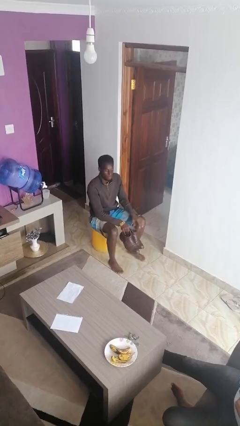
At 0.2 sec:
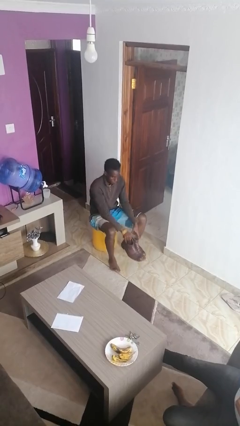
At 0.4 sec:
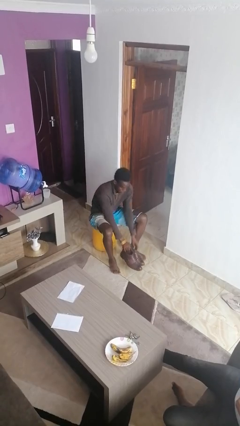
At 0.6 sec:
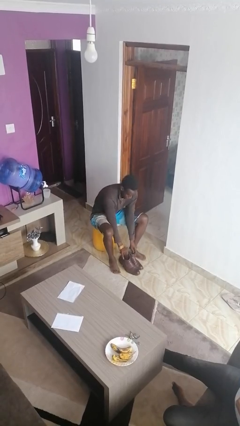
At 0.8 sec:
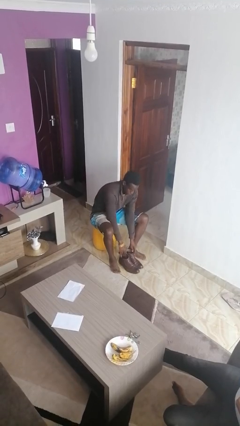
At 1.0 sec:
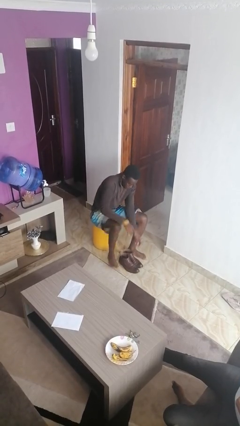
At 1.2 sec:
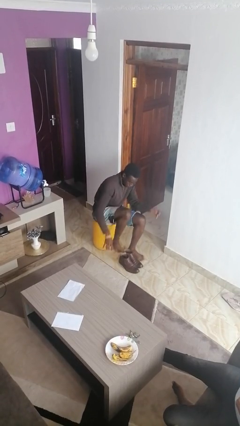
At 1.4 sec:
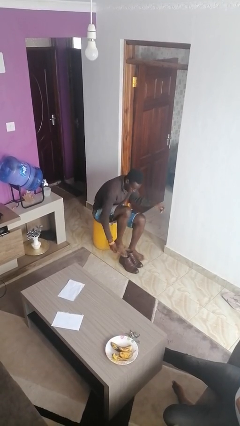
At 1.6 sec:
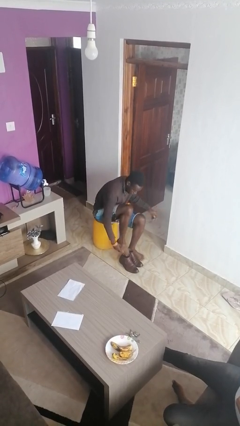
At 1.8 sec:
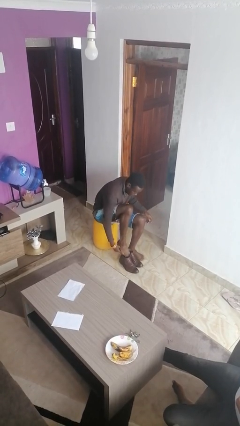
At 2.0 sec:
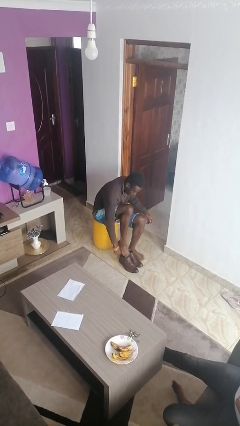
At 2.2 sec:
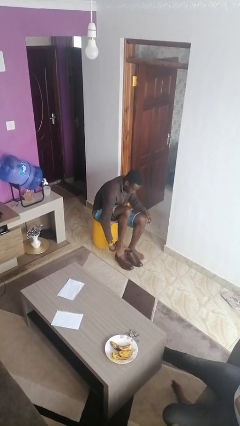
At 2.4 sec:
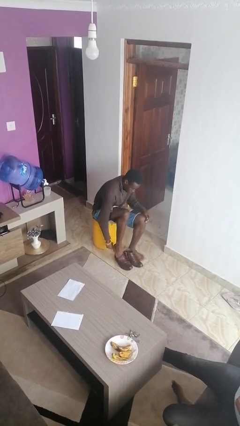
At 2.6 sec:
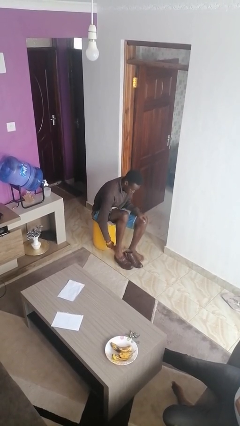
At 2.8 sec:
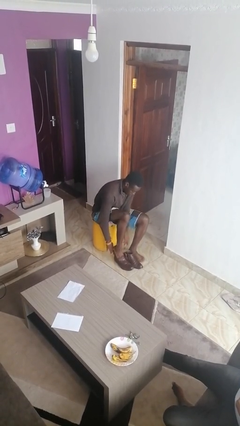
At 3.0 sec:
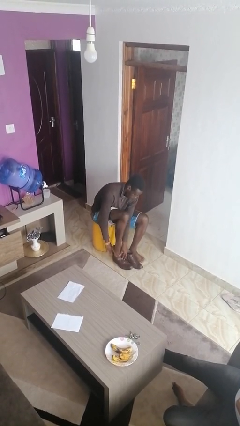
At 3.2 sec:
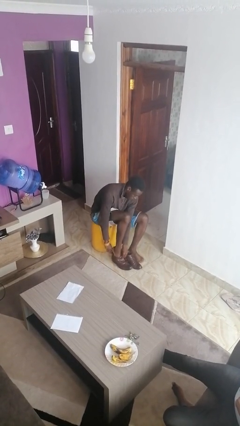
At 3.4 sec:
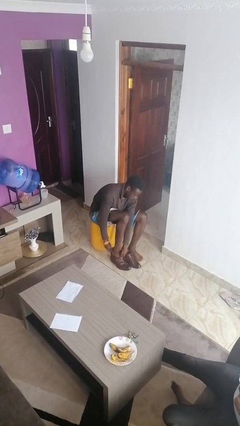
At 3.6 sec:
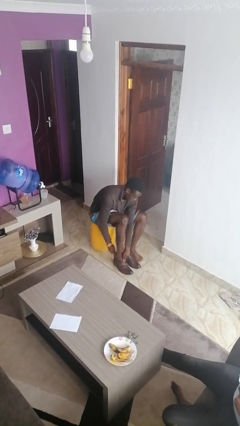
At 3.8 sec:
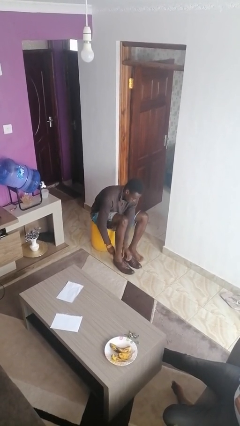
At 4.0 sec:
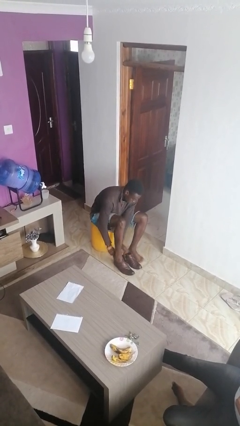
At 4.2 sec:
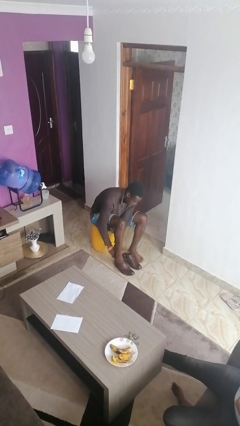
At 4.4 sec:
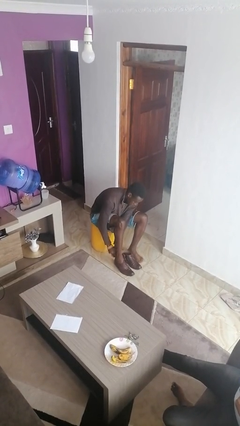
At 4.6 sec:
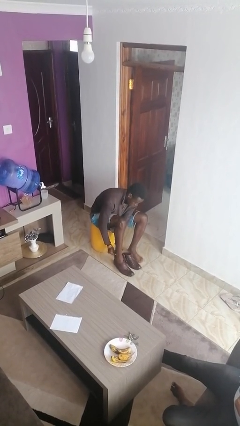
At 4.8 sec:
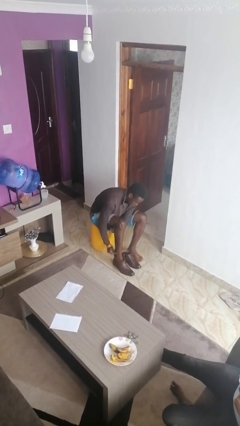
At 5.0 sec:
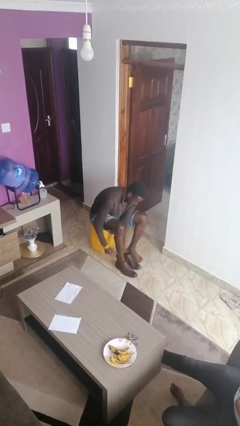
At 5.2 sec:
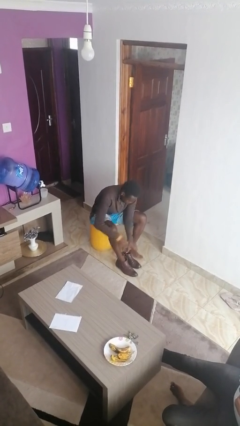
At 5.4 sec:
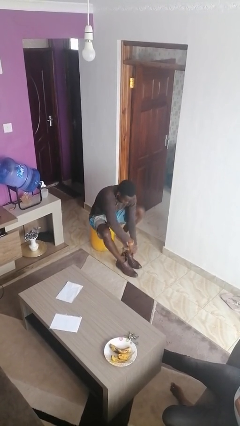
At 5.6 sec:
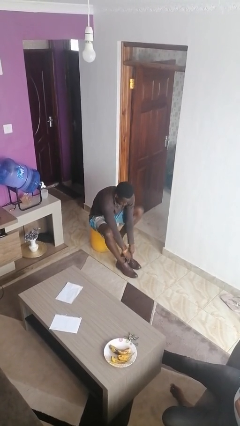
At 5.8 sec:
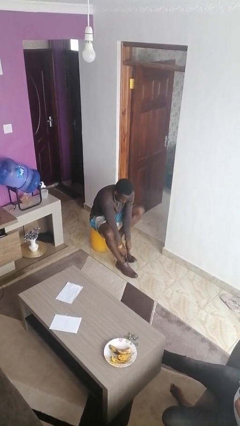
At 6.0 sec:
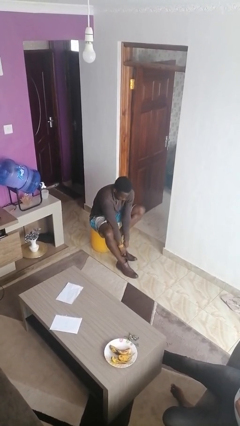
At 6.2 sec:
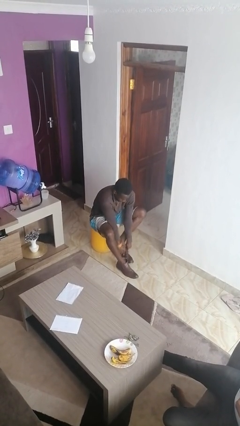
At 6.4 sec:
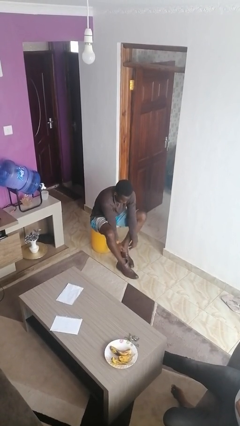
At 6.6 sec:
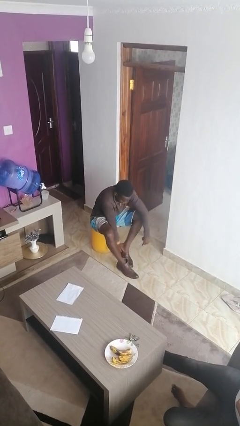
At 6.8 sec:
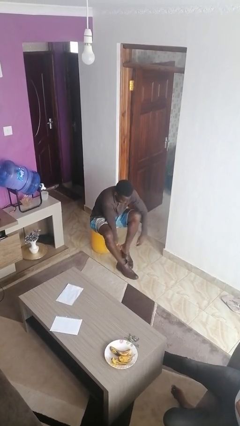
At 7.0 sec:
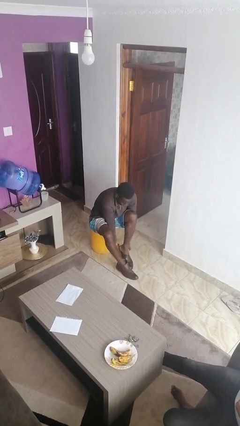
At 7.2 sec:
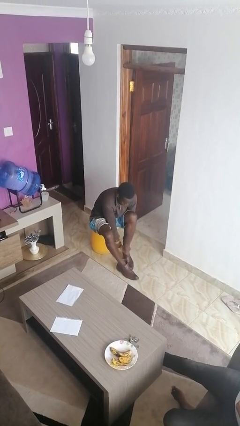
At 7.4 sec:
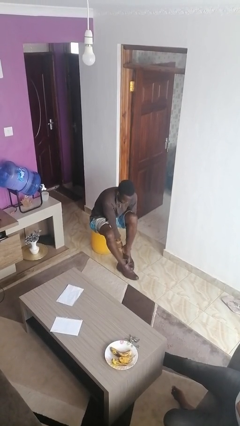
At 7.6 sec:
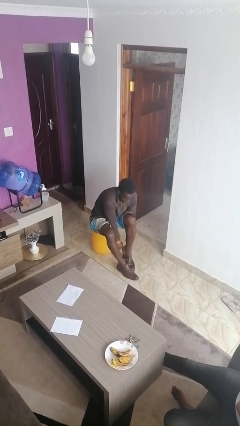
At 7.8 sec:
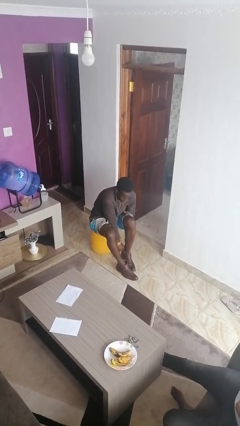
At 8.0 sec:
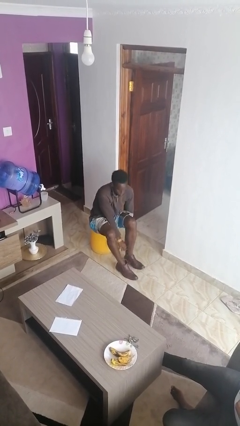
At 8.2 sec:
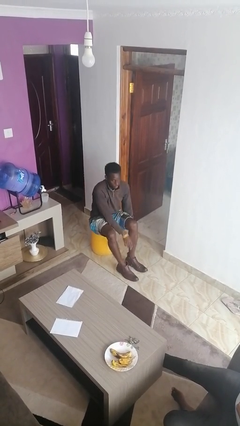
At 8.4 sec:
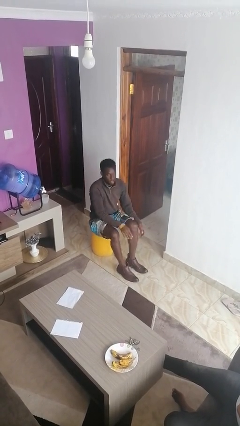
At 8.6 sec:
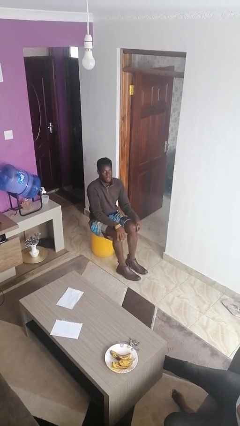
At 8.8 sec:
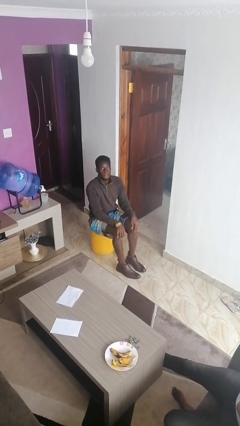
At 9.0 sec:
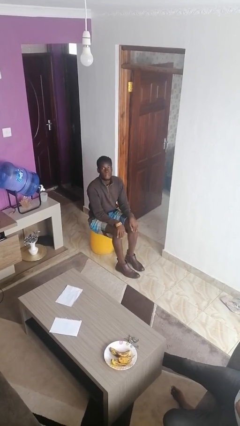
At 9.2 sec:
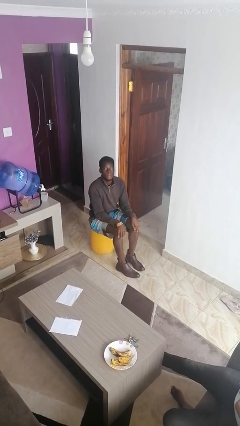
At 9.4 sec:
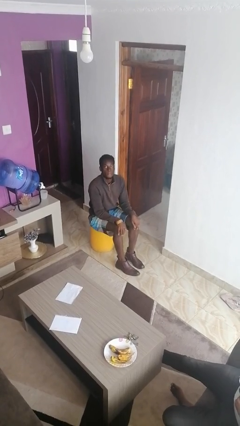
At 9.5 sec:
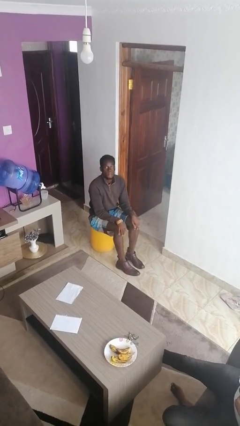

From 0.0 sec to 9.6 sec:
person puts on boots

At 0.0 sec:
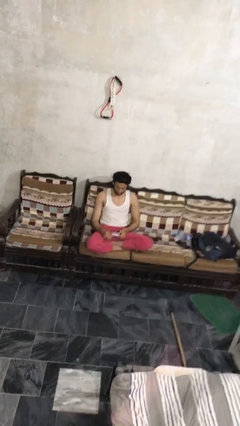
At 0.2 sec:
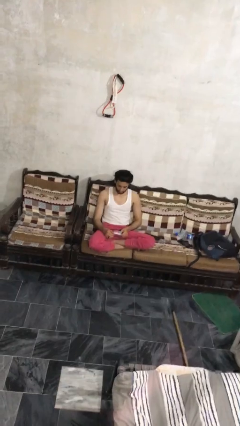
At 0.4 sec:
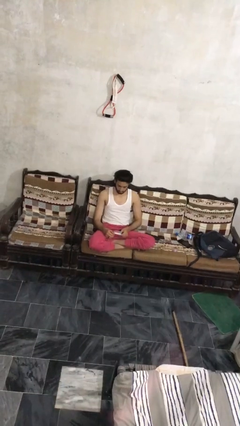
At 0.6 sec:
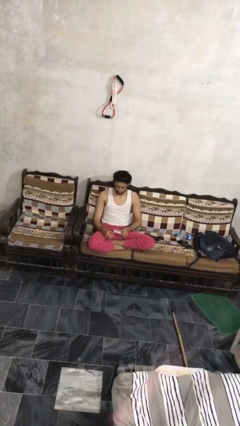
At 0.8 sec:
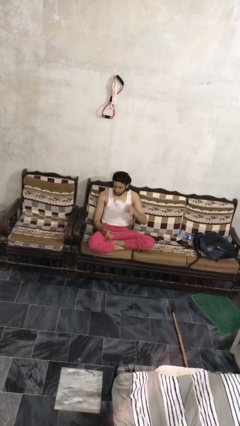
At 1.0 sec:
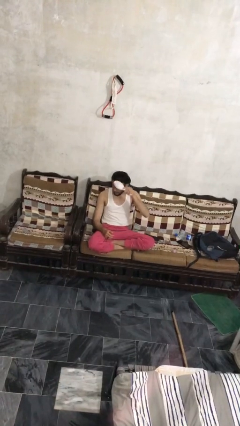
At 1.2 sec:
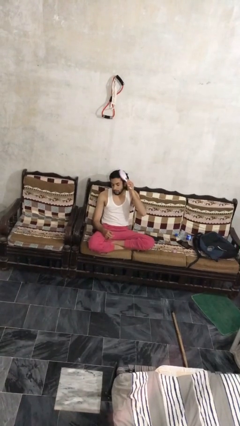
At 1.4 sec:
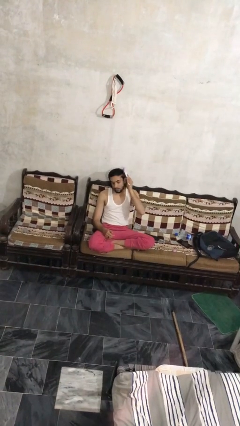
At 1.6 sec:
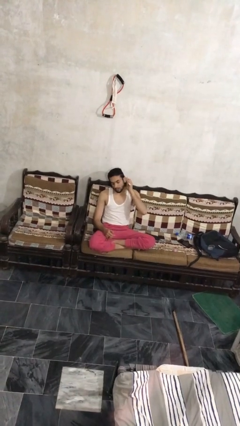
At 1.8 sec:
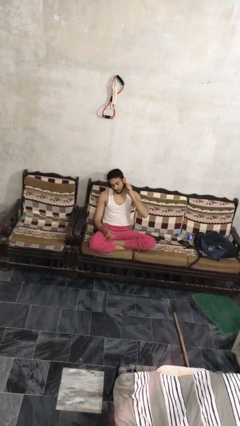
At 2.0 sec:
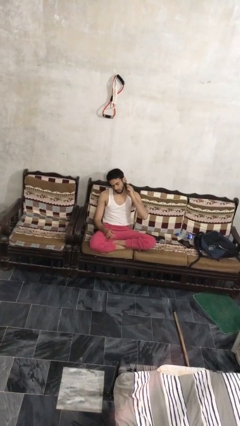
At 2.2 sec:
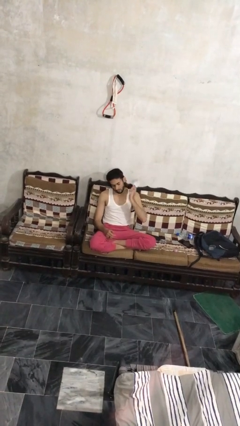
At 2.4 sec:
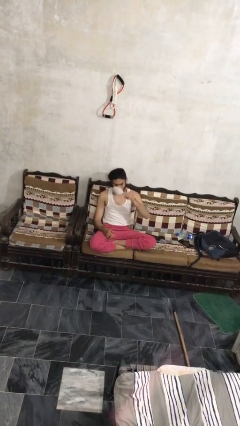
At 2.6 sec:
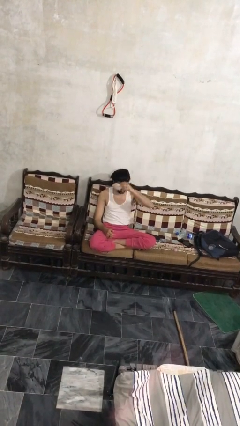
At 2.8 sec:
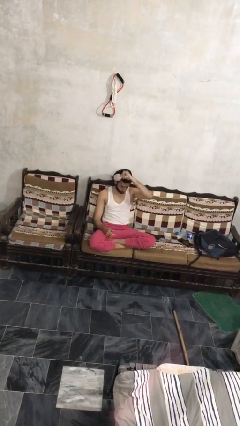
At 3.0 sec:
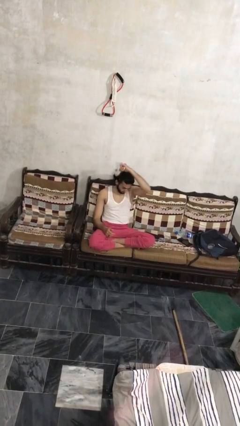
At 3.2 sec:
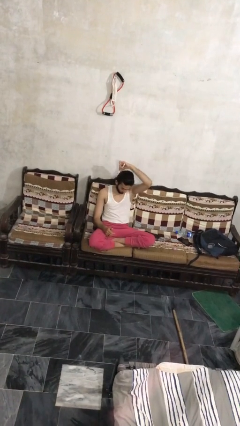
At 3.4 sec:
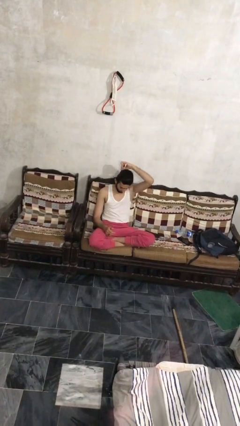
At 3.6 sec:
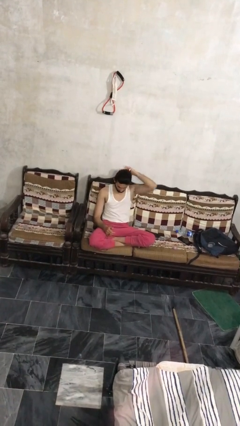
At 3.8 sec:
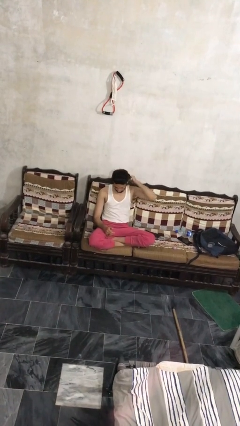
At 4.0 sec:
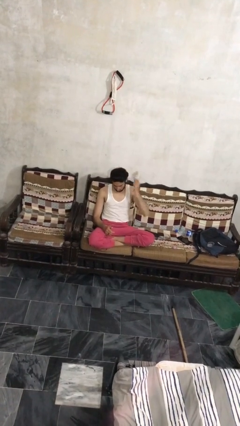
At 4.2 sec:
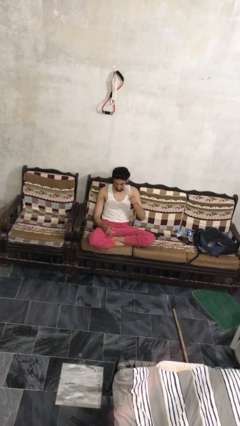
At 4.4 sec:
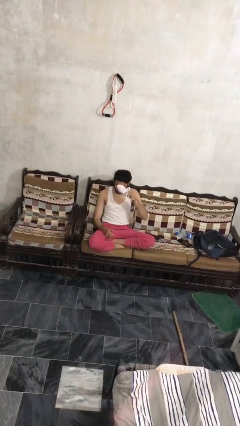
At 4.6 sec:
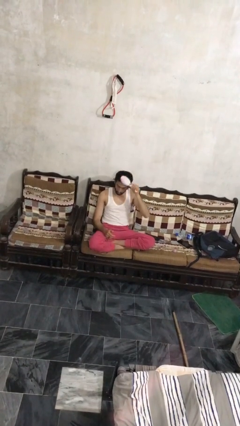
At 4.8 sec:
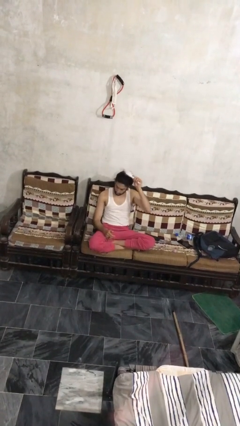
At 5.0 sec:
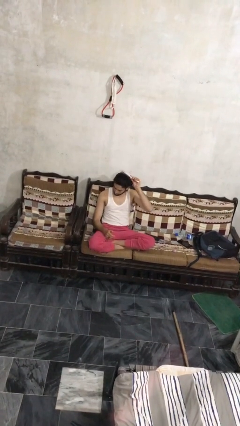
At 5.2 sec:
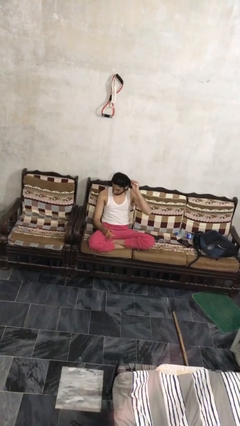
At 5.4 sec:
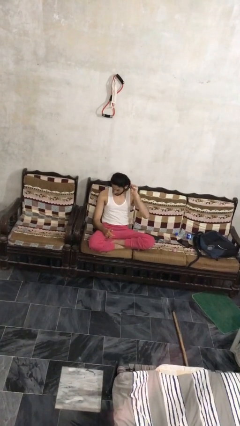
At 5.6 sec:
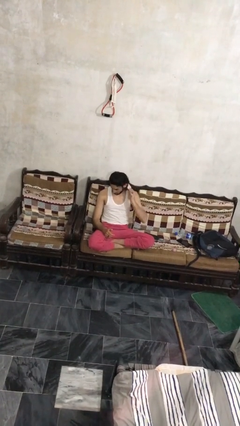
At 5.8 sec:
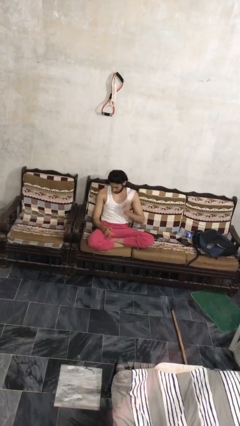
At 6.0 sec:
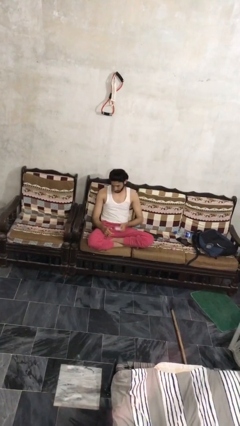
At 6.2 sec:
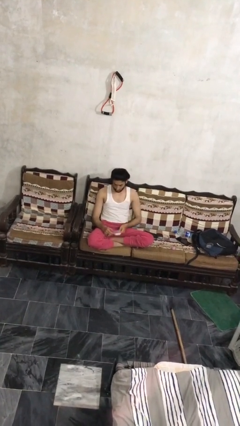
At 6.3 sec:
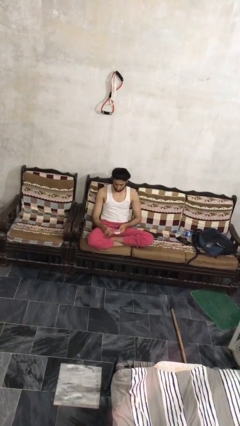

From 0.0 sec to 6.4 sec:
person brushes hair

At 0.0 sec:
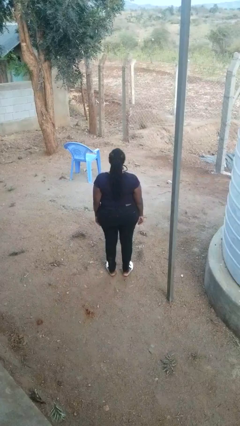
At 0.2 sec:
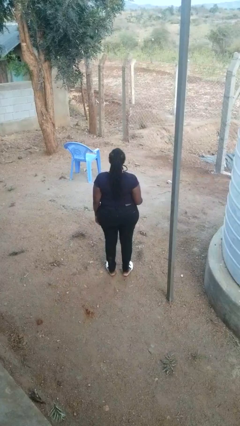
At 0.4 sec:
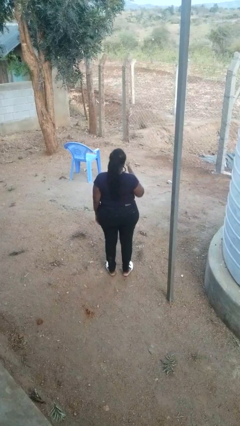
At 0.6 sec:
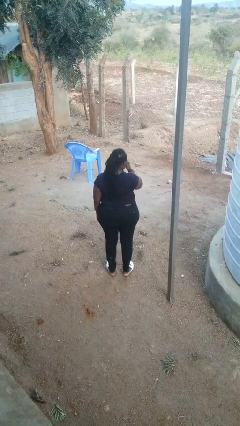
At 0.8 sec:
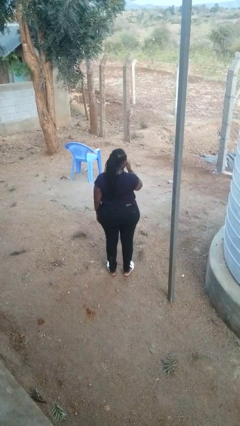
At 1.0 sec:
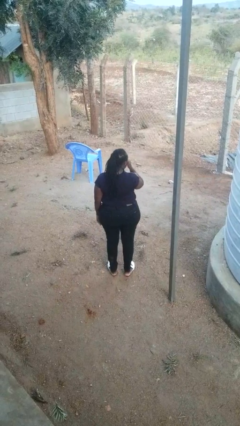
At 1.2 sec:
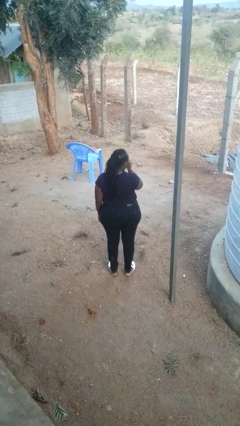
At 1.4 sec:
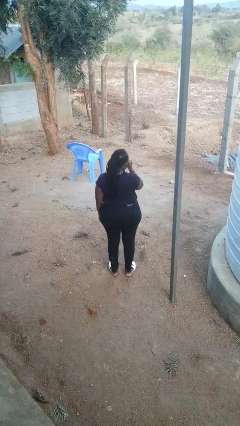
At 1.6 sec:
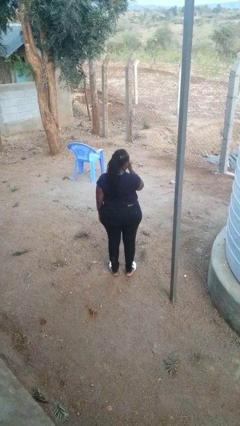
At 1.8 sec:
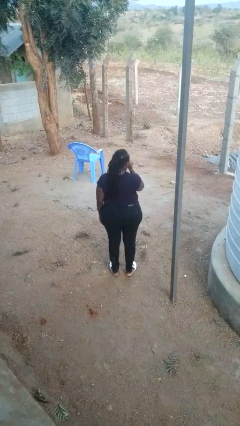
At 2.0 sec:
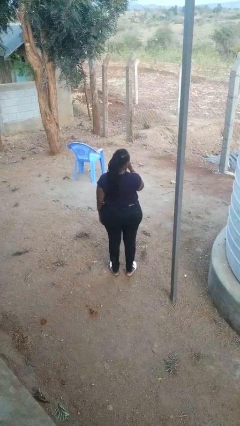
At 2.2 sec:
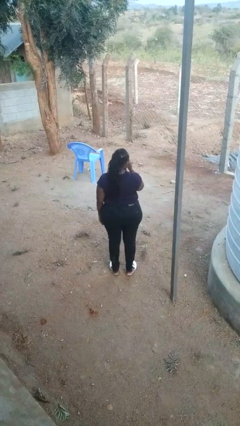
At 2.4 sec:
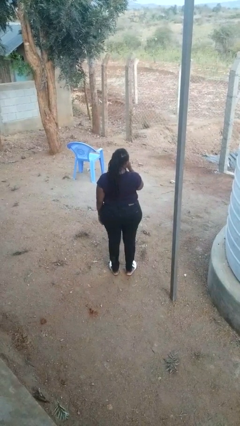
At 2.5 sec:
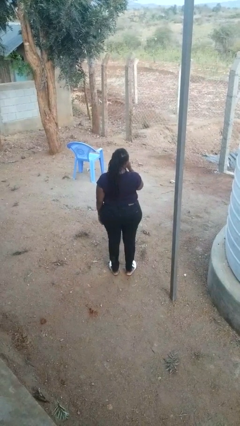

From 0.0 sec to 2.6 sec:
person rubs eyes
